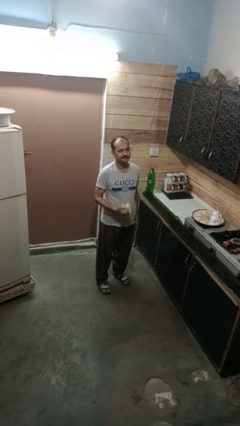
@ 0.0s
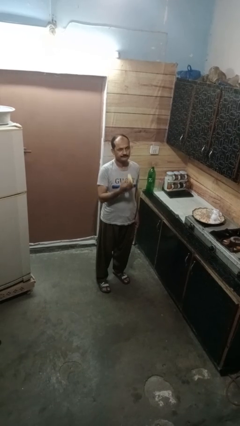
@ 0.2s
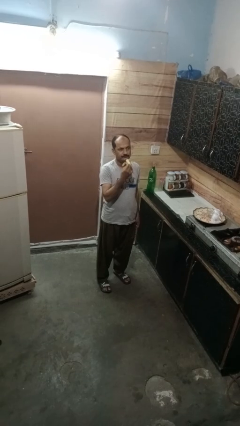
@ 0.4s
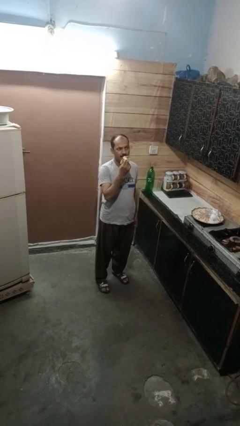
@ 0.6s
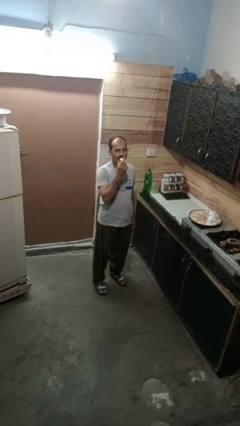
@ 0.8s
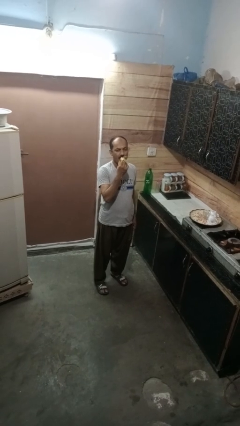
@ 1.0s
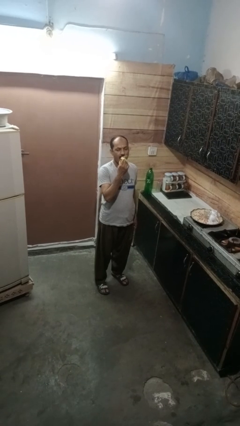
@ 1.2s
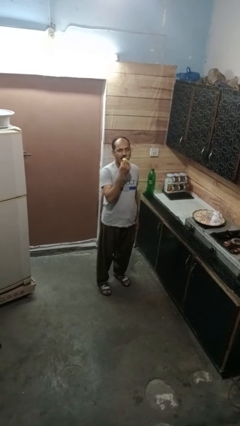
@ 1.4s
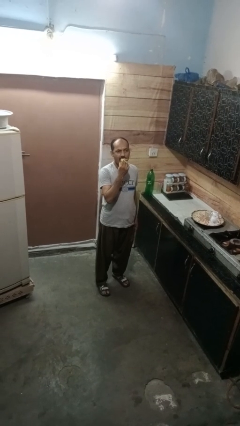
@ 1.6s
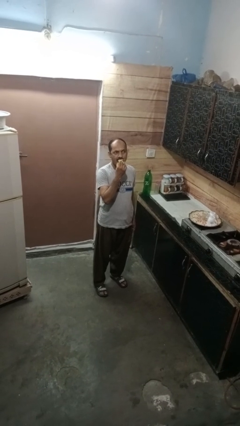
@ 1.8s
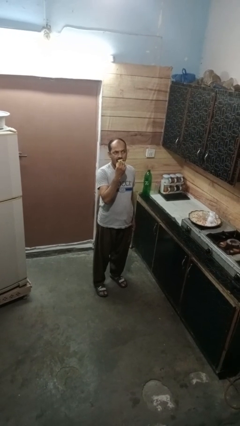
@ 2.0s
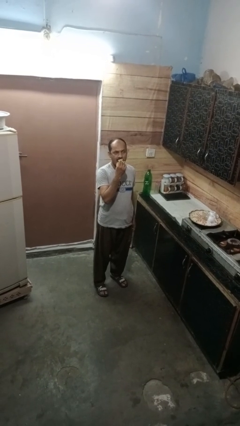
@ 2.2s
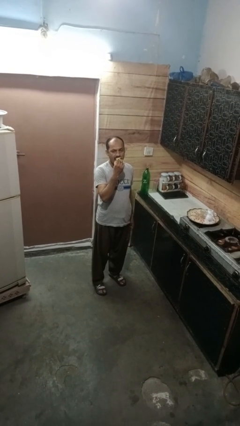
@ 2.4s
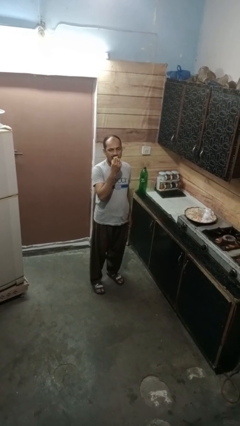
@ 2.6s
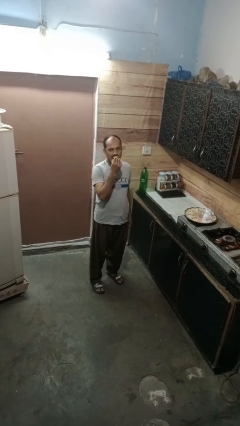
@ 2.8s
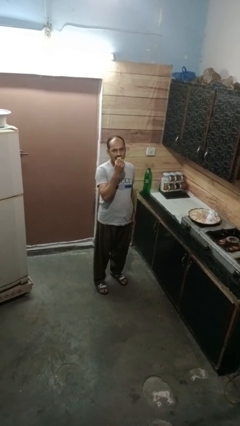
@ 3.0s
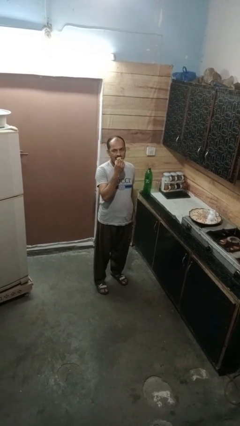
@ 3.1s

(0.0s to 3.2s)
person eats banana

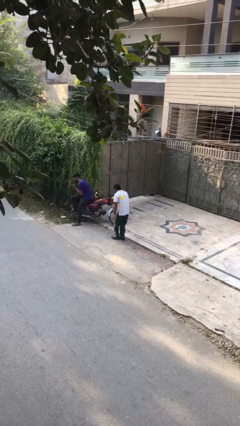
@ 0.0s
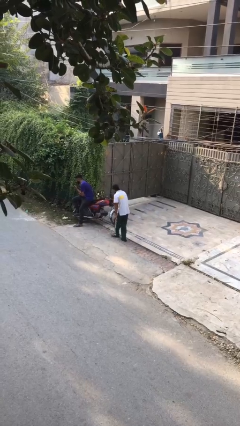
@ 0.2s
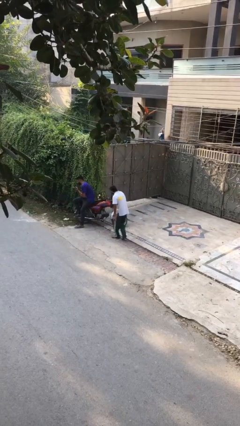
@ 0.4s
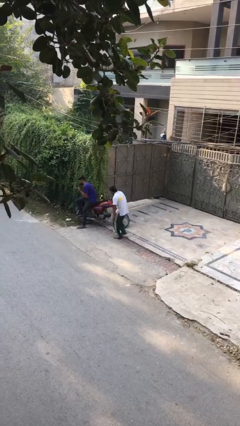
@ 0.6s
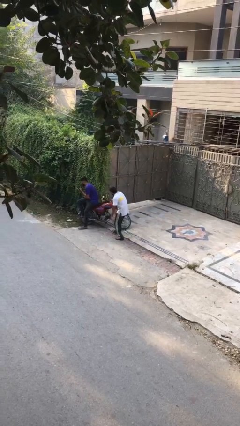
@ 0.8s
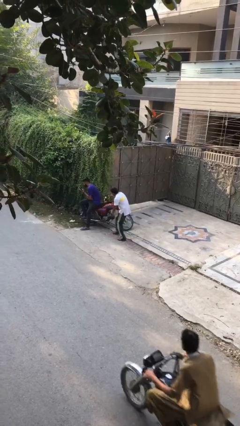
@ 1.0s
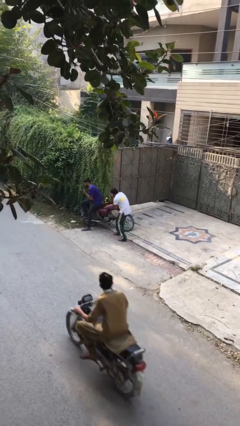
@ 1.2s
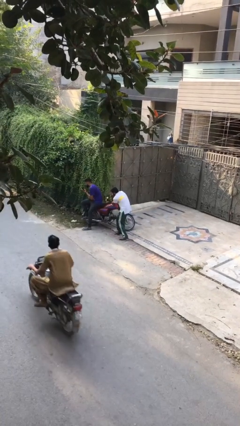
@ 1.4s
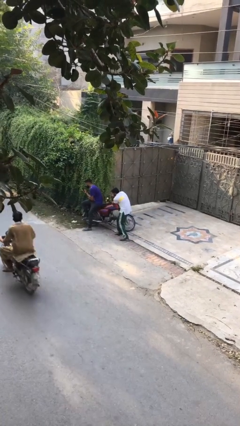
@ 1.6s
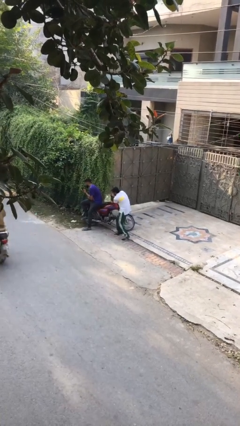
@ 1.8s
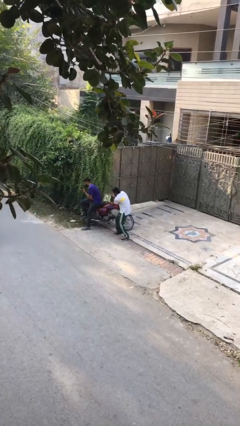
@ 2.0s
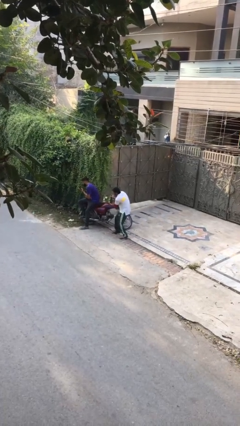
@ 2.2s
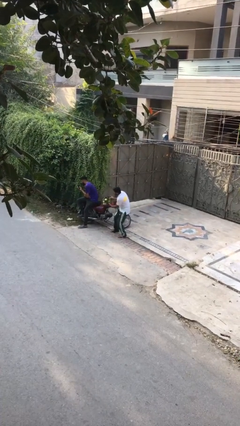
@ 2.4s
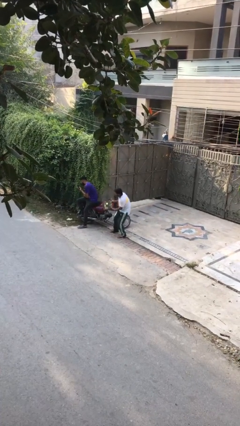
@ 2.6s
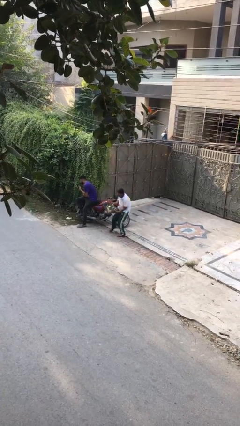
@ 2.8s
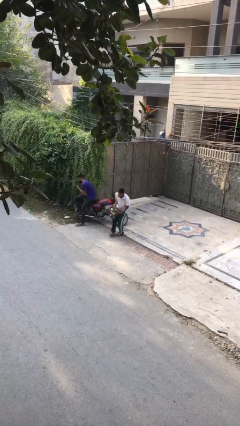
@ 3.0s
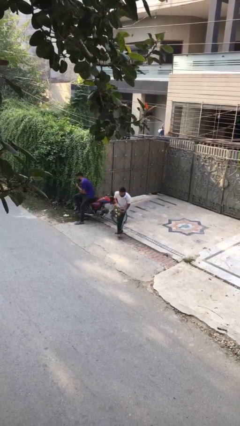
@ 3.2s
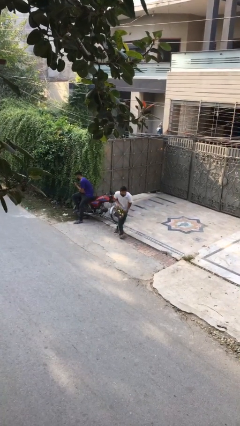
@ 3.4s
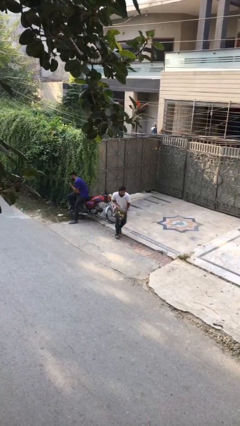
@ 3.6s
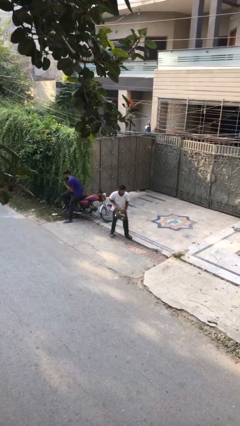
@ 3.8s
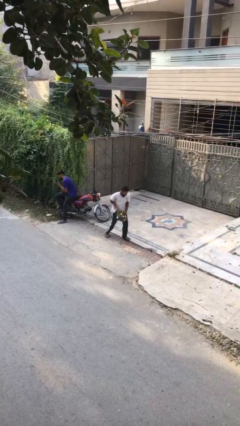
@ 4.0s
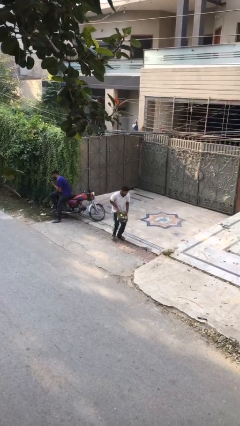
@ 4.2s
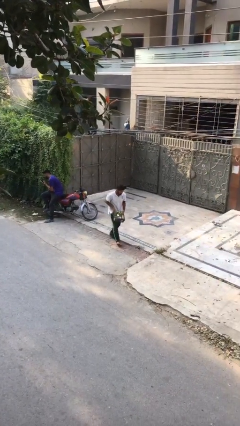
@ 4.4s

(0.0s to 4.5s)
person steals object from person

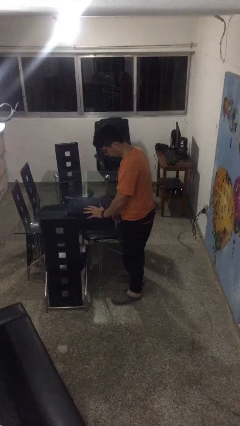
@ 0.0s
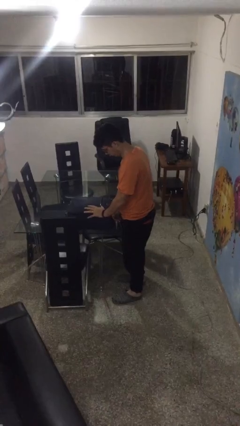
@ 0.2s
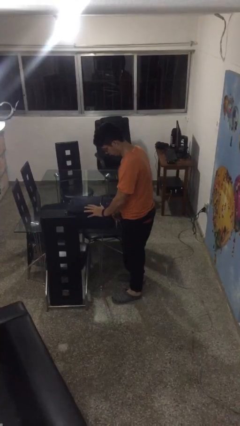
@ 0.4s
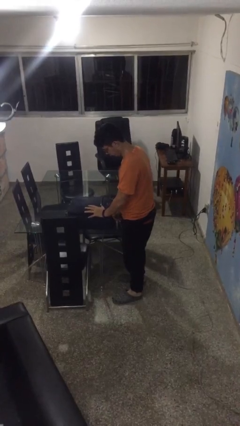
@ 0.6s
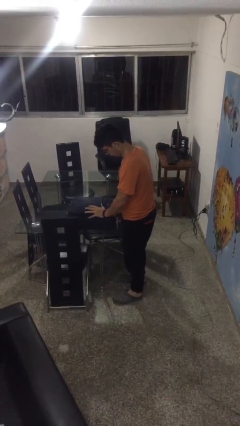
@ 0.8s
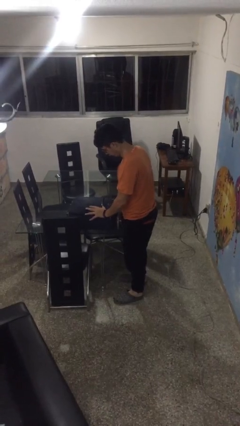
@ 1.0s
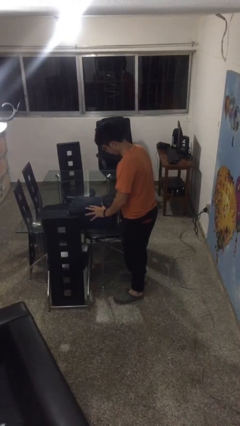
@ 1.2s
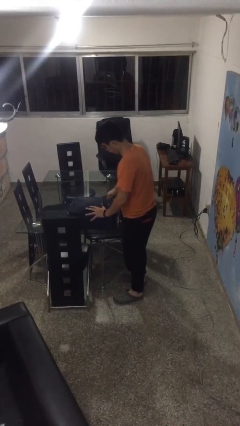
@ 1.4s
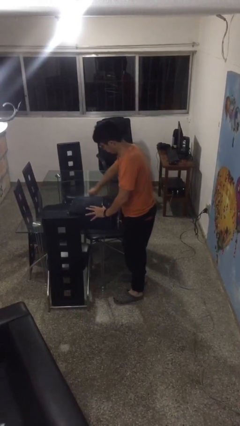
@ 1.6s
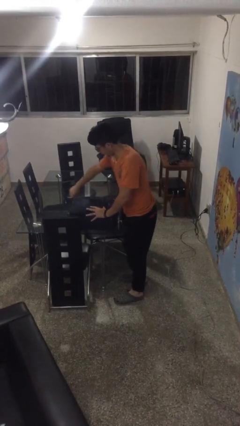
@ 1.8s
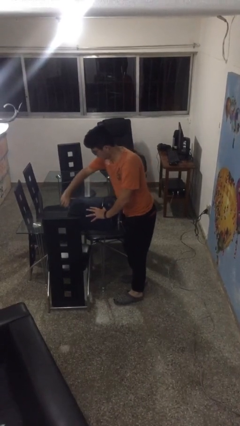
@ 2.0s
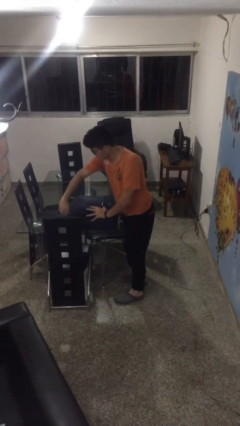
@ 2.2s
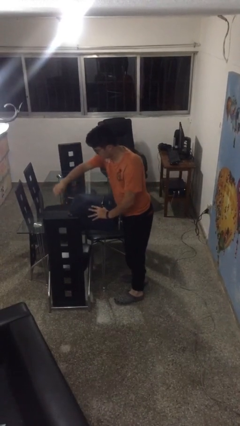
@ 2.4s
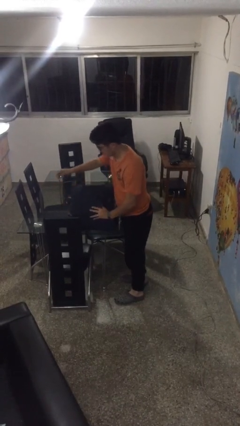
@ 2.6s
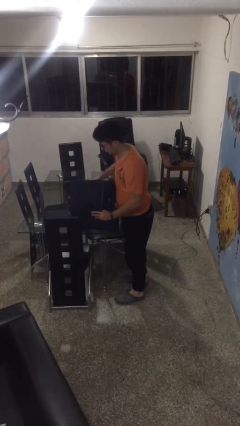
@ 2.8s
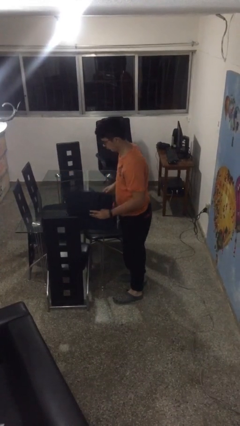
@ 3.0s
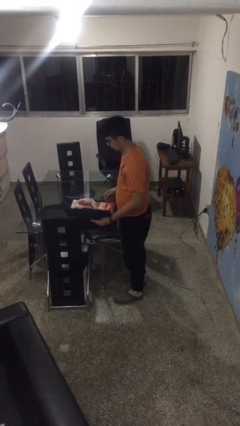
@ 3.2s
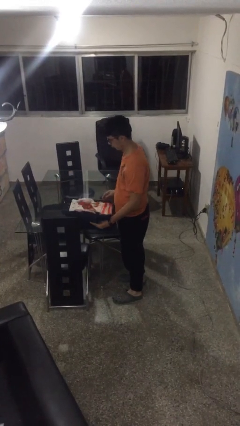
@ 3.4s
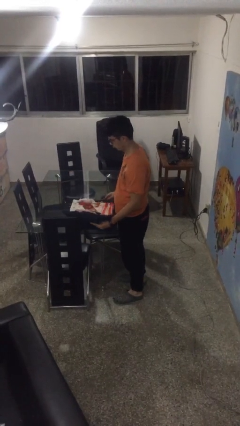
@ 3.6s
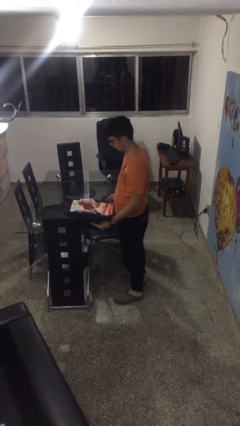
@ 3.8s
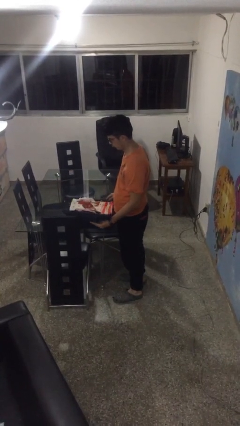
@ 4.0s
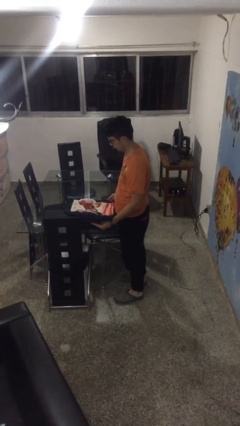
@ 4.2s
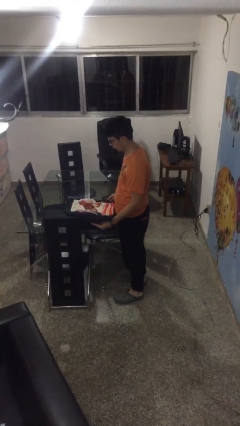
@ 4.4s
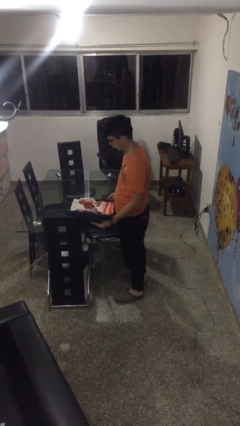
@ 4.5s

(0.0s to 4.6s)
person opens suitcase

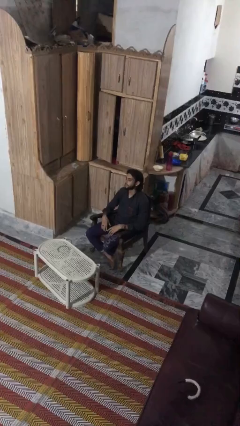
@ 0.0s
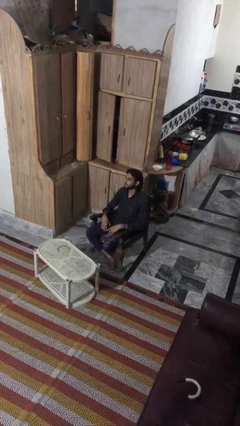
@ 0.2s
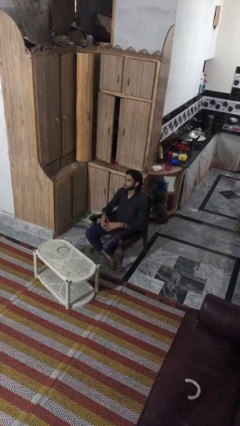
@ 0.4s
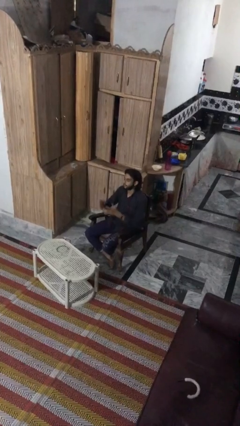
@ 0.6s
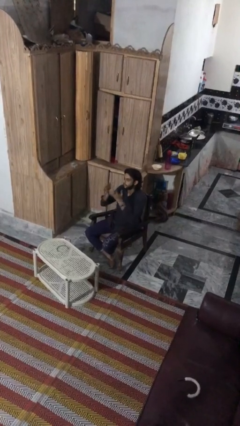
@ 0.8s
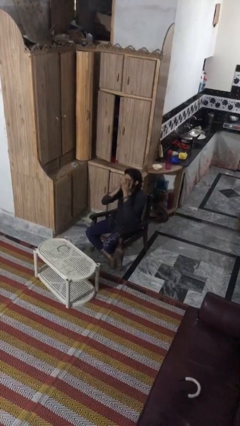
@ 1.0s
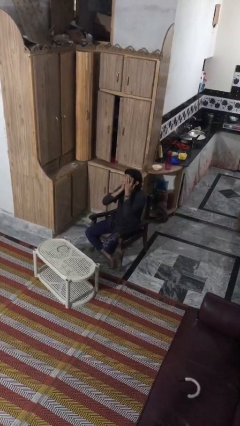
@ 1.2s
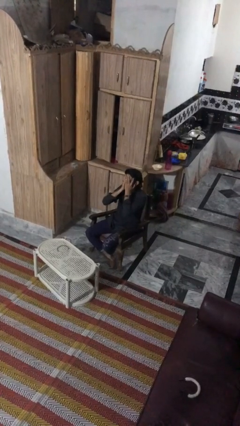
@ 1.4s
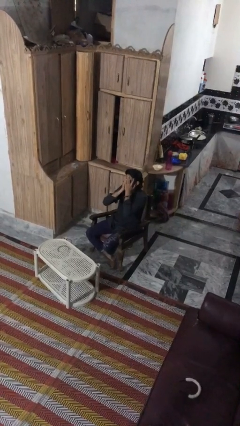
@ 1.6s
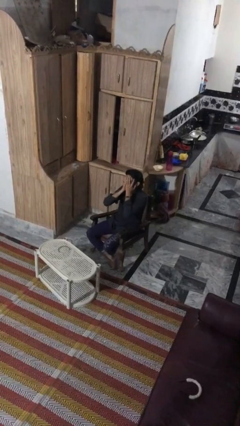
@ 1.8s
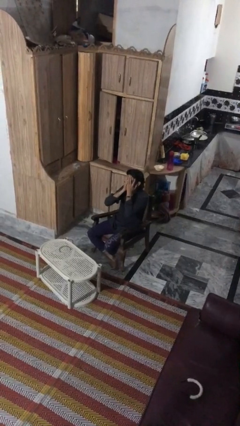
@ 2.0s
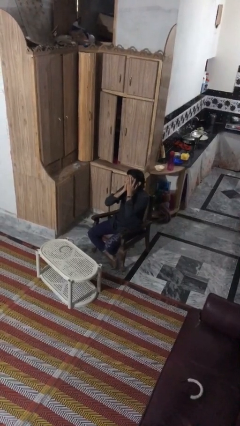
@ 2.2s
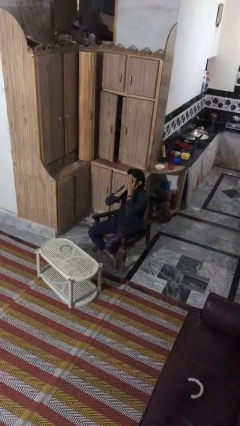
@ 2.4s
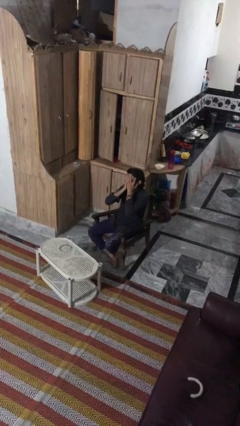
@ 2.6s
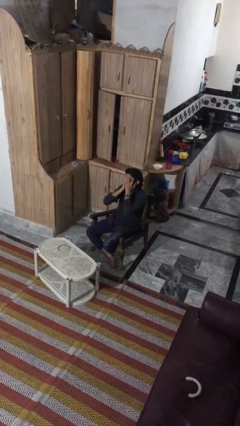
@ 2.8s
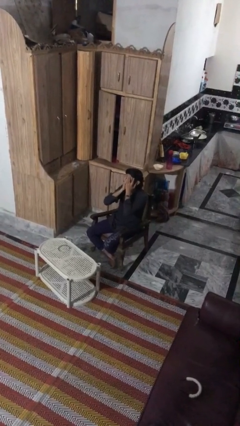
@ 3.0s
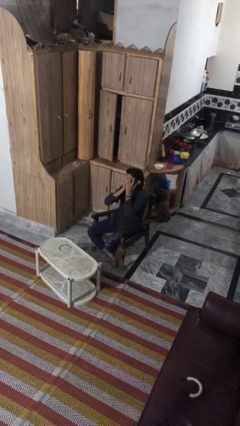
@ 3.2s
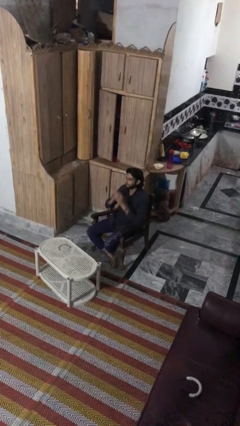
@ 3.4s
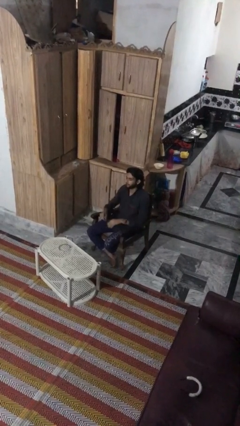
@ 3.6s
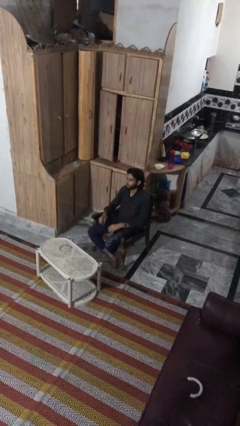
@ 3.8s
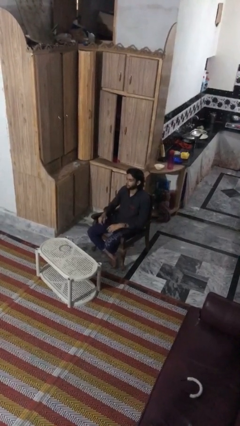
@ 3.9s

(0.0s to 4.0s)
person covers face with hands

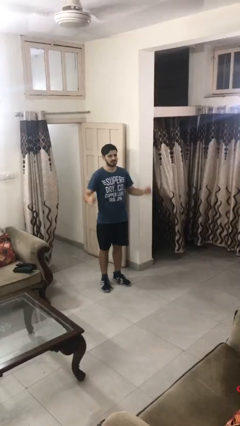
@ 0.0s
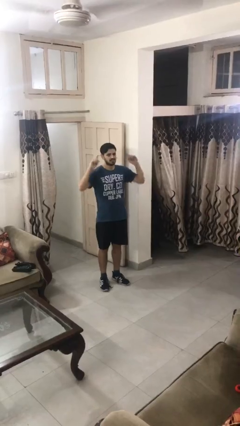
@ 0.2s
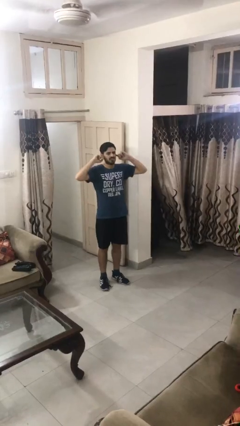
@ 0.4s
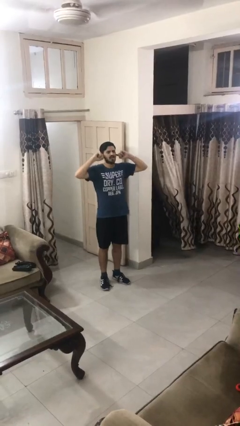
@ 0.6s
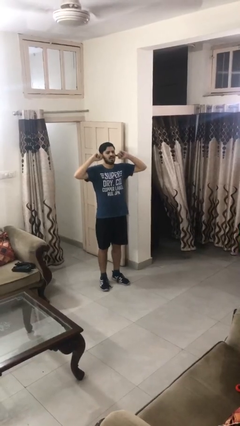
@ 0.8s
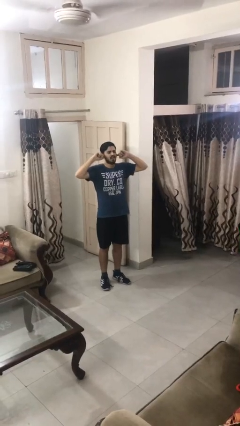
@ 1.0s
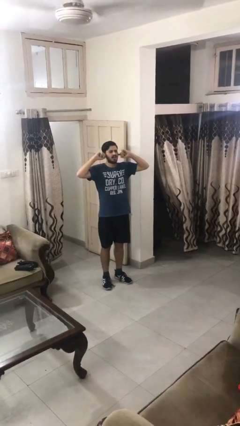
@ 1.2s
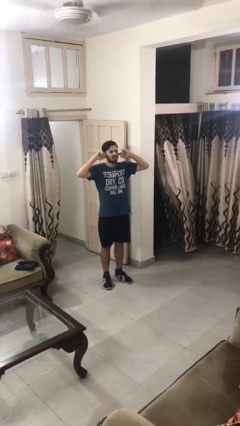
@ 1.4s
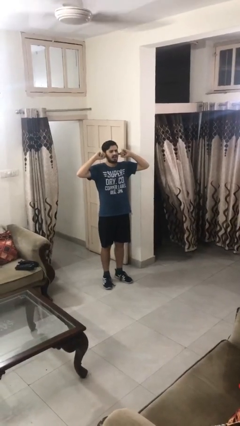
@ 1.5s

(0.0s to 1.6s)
person puts fingers in ear
